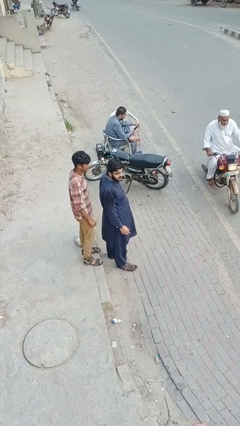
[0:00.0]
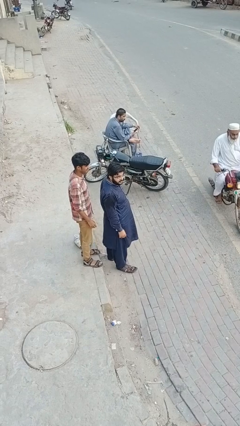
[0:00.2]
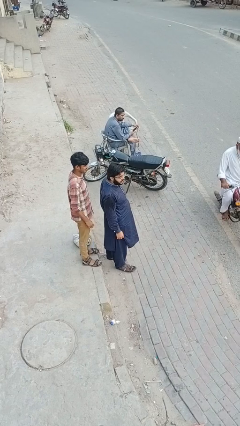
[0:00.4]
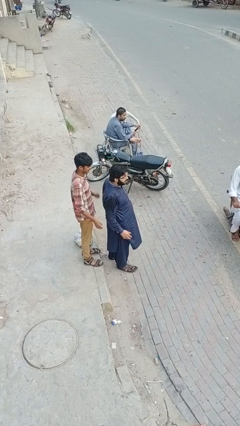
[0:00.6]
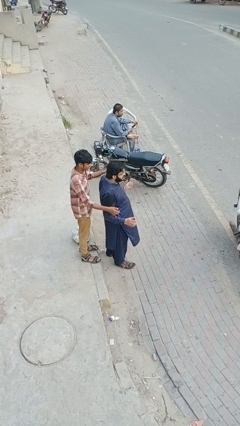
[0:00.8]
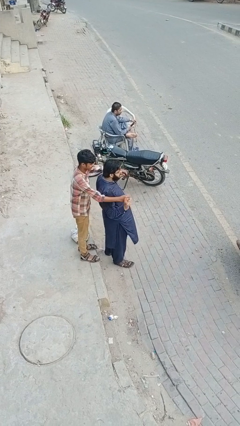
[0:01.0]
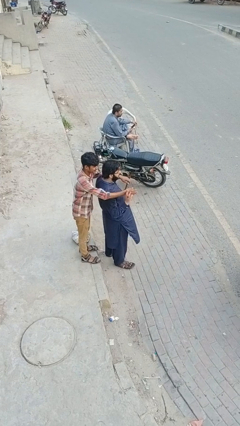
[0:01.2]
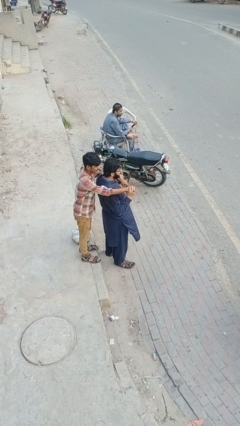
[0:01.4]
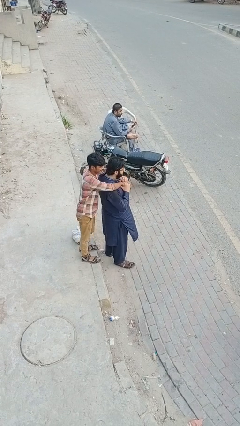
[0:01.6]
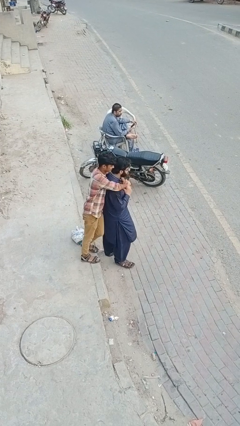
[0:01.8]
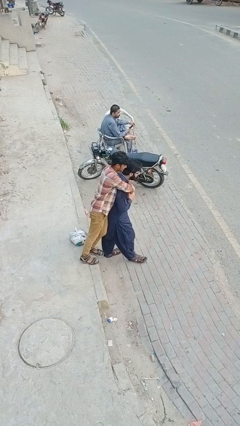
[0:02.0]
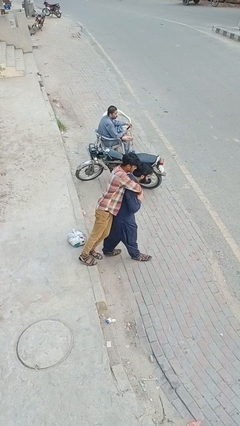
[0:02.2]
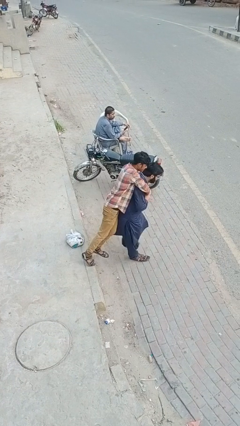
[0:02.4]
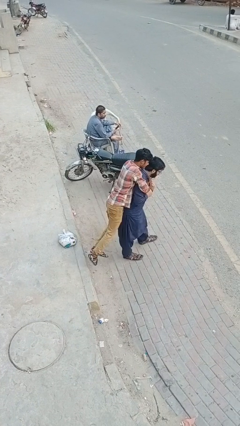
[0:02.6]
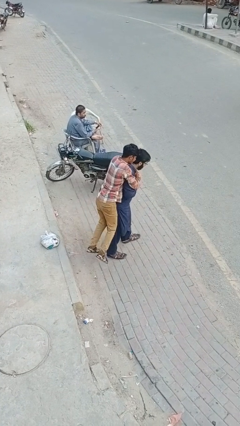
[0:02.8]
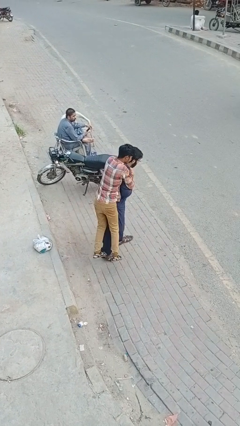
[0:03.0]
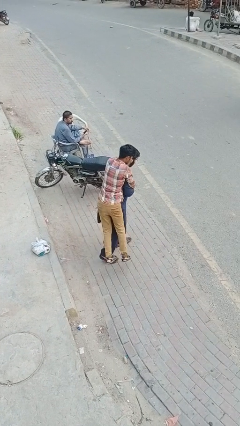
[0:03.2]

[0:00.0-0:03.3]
person carries person over shoulder

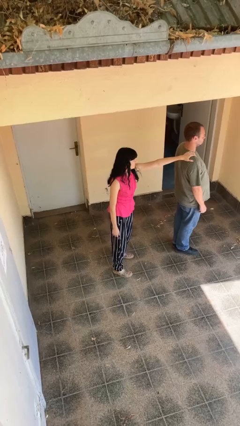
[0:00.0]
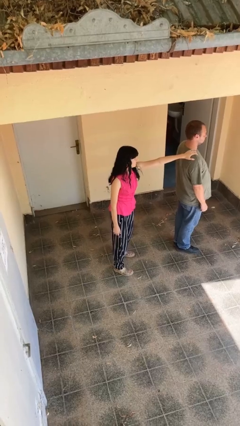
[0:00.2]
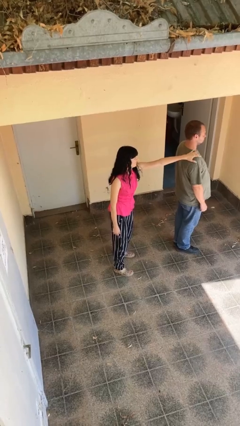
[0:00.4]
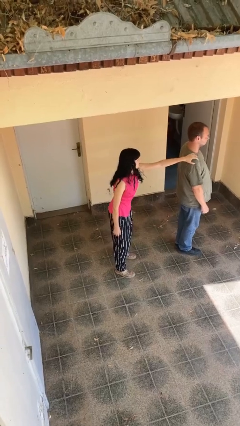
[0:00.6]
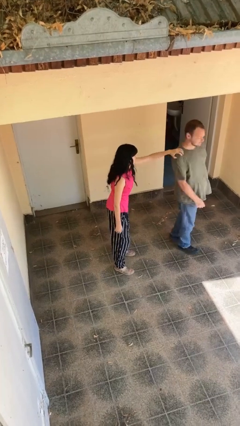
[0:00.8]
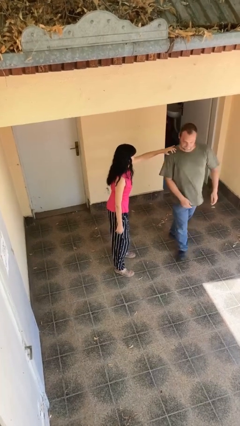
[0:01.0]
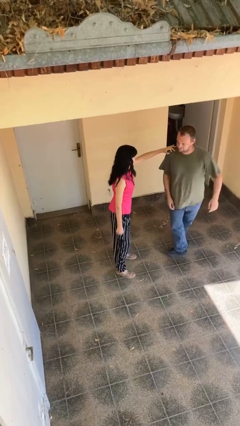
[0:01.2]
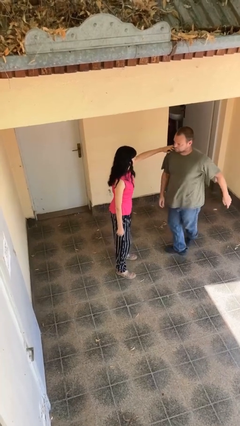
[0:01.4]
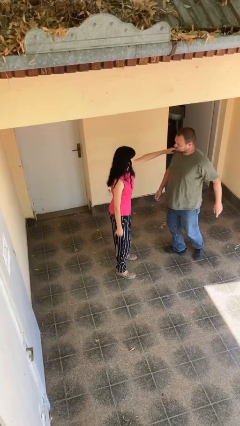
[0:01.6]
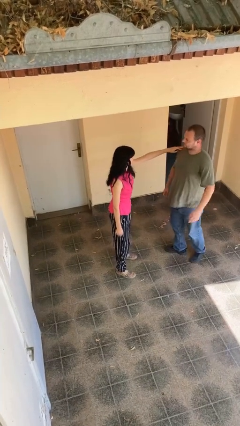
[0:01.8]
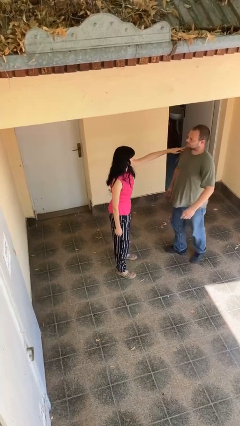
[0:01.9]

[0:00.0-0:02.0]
person spins person around

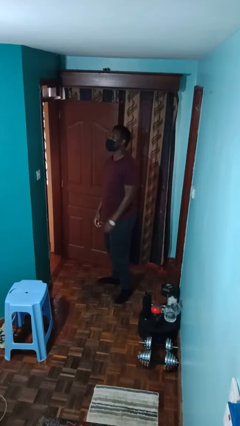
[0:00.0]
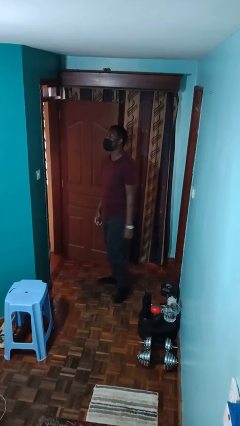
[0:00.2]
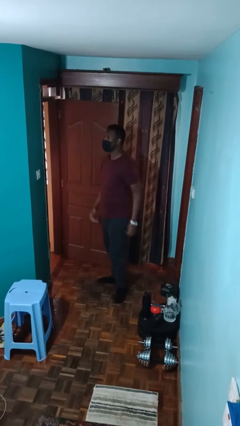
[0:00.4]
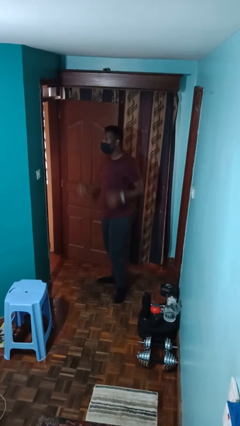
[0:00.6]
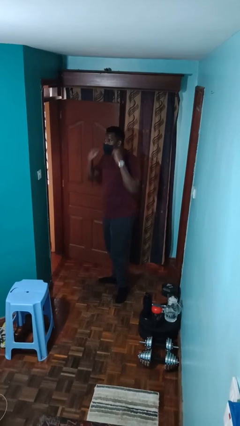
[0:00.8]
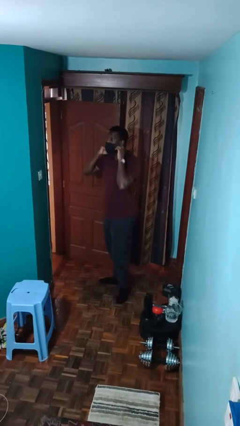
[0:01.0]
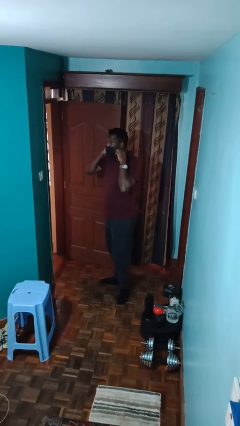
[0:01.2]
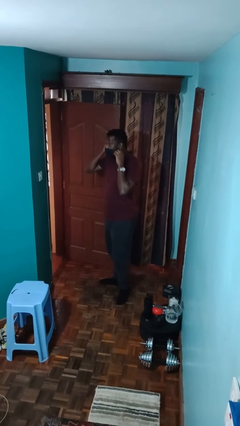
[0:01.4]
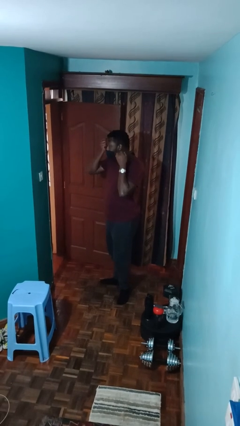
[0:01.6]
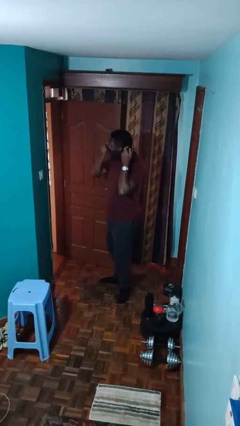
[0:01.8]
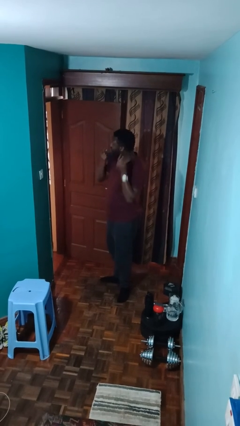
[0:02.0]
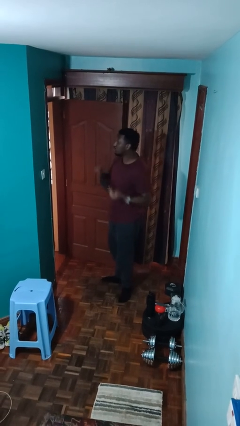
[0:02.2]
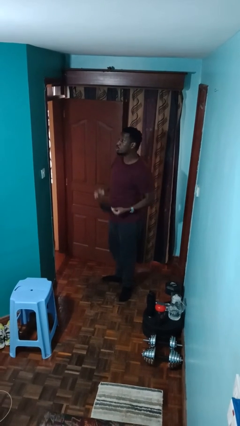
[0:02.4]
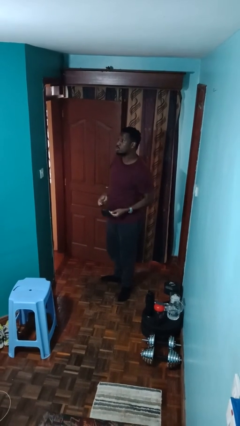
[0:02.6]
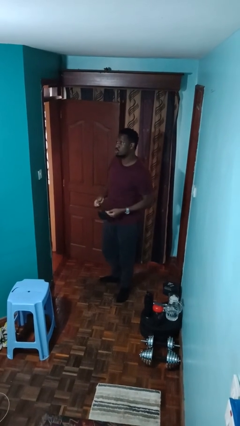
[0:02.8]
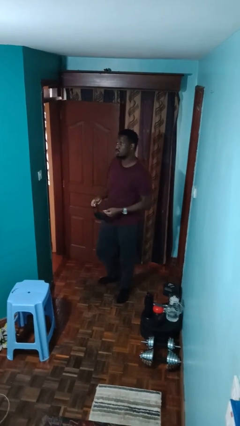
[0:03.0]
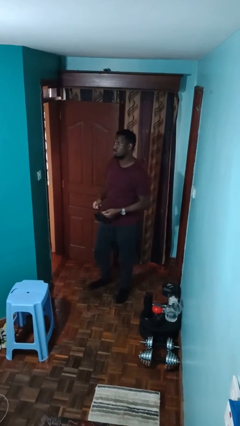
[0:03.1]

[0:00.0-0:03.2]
person takes off facemask

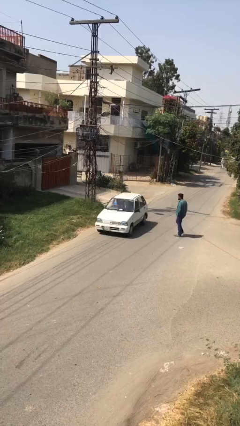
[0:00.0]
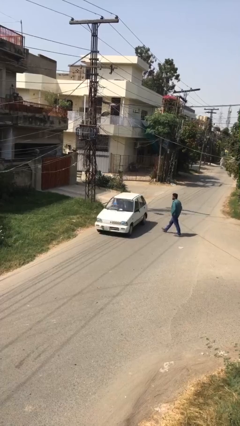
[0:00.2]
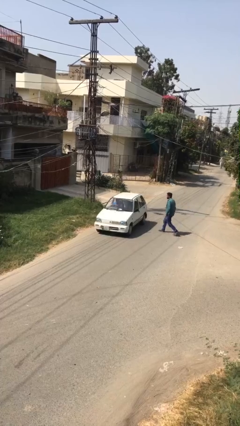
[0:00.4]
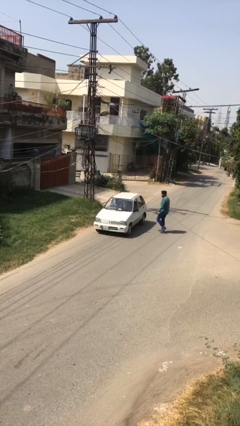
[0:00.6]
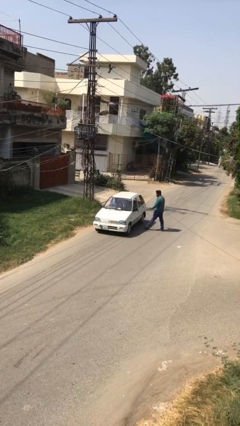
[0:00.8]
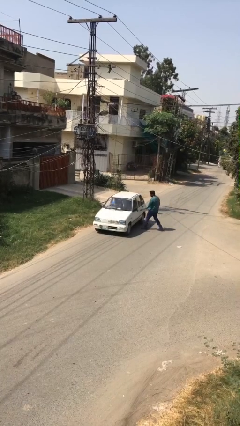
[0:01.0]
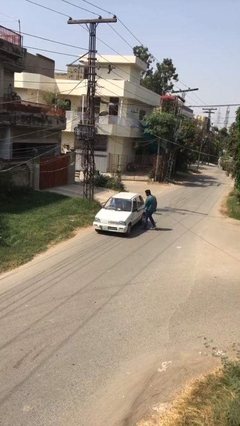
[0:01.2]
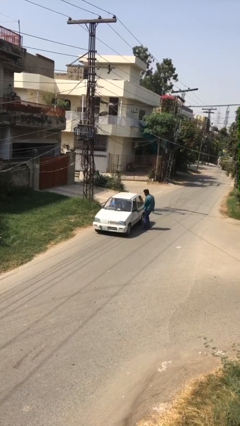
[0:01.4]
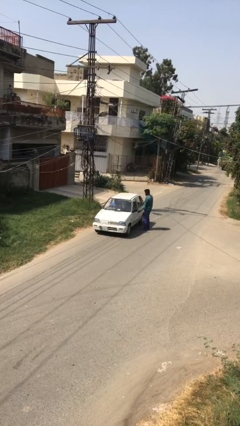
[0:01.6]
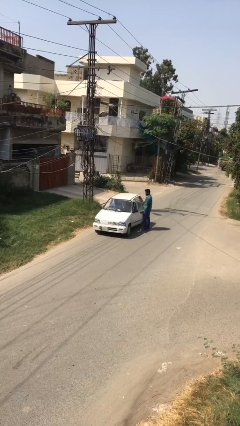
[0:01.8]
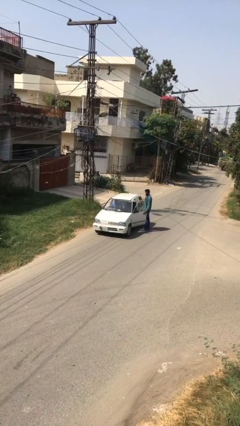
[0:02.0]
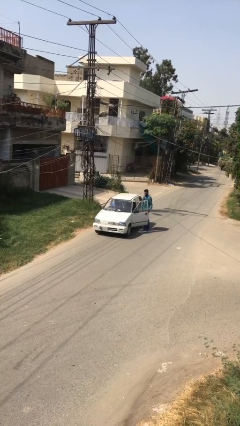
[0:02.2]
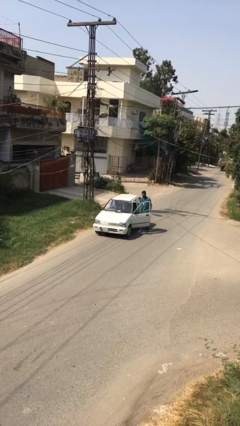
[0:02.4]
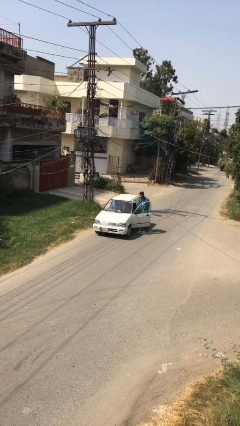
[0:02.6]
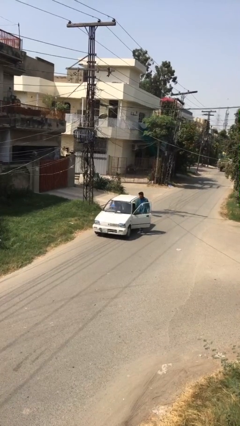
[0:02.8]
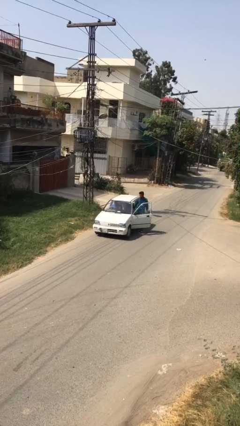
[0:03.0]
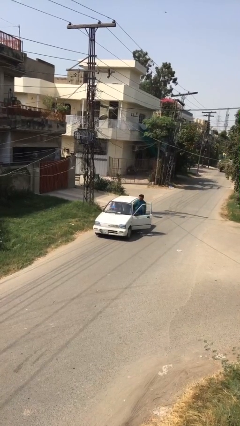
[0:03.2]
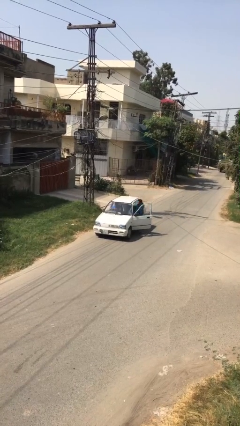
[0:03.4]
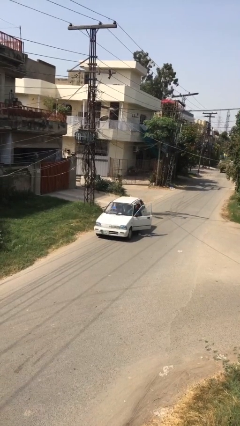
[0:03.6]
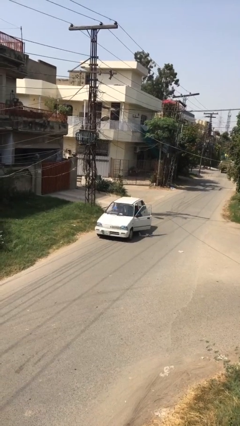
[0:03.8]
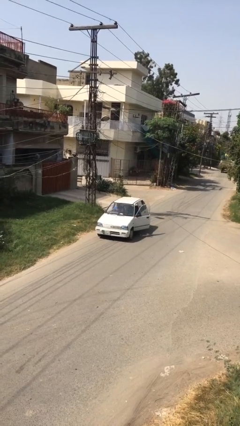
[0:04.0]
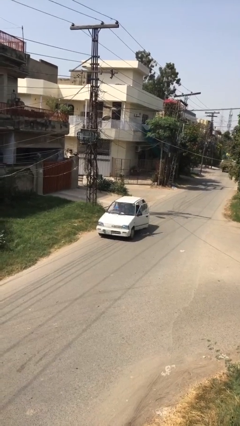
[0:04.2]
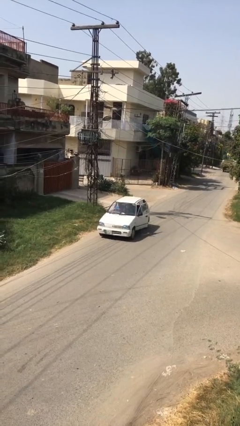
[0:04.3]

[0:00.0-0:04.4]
car picks up person

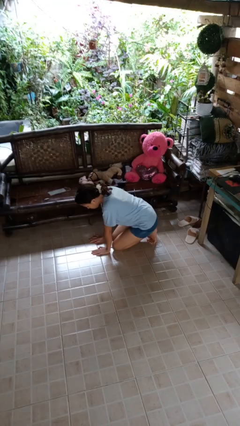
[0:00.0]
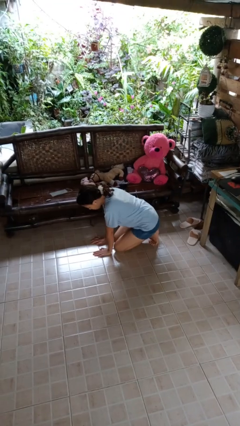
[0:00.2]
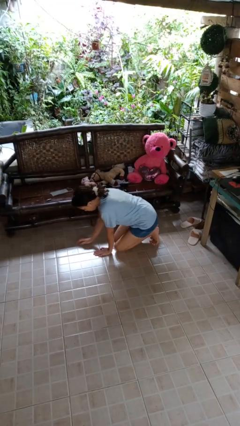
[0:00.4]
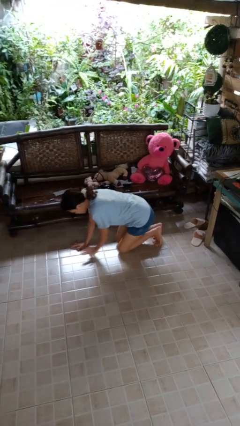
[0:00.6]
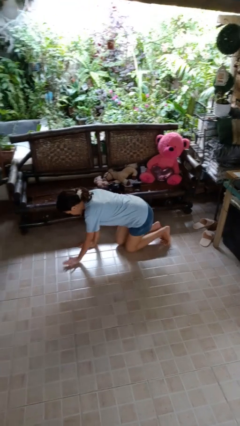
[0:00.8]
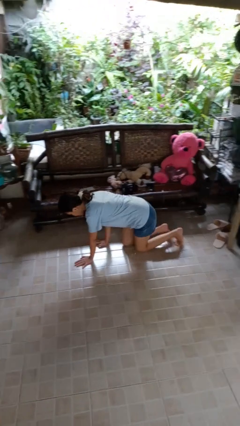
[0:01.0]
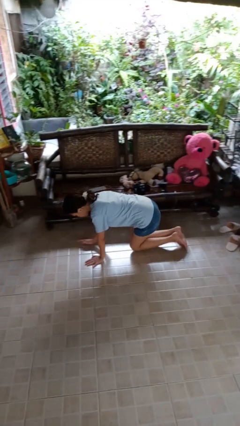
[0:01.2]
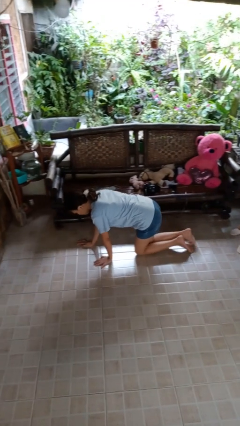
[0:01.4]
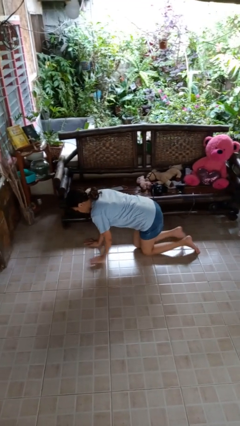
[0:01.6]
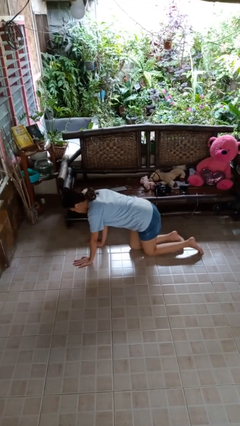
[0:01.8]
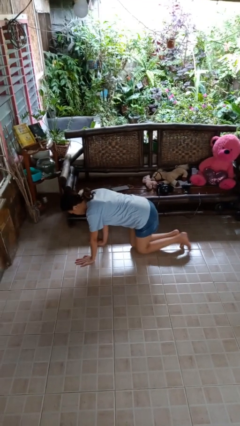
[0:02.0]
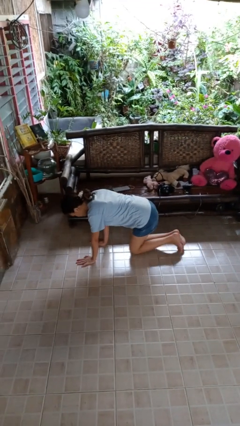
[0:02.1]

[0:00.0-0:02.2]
person crawls

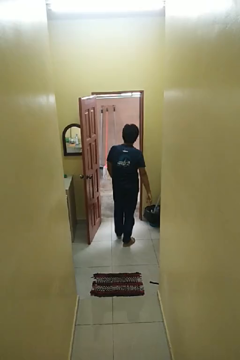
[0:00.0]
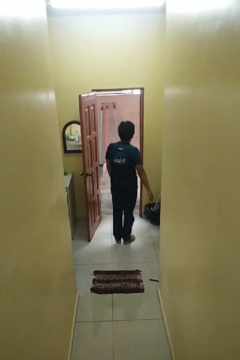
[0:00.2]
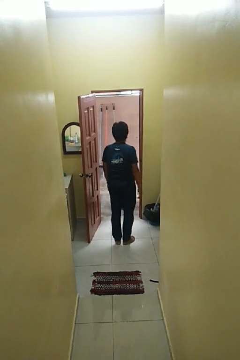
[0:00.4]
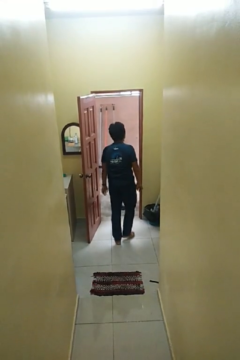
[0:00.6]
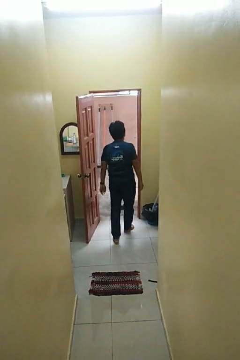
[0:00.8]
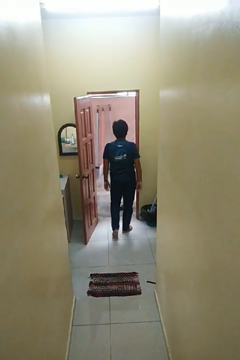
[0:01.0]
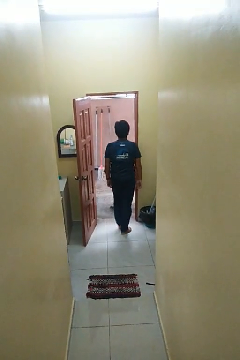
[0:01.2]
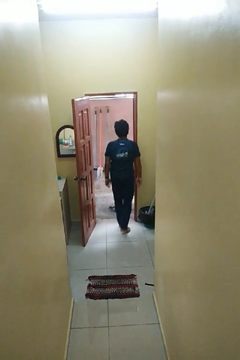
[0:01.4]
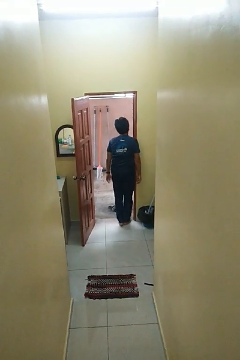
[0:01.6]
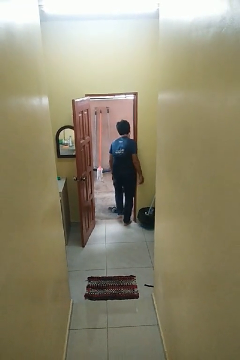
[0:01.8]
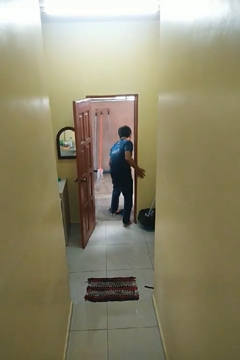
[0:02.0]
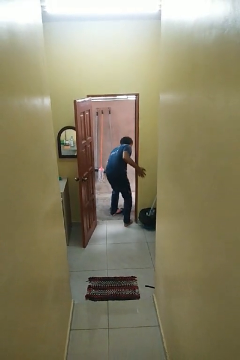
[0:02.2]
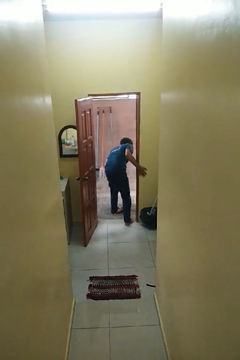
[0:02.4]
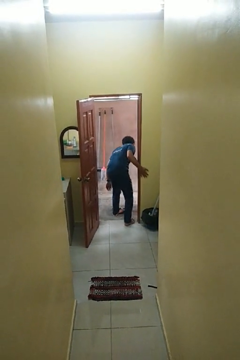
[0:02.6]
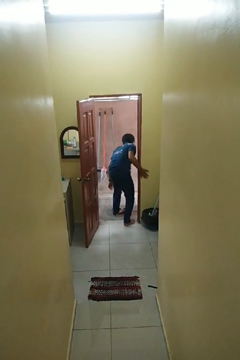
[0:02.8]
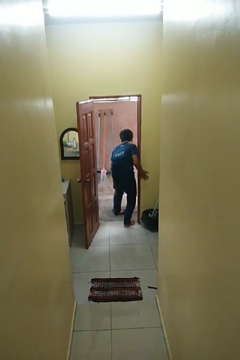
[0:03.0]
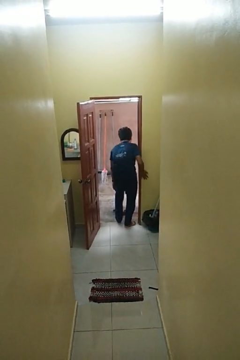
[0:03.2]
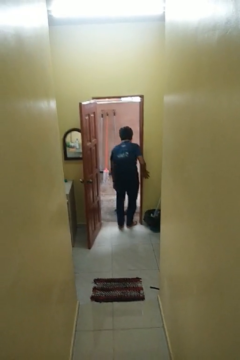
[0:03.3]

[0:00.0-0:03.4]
person bumps into wall
